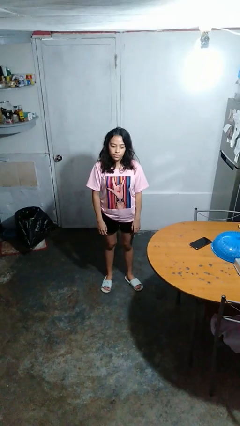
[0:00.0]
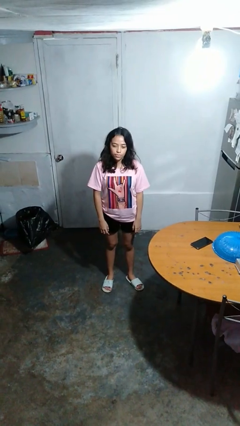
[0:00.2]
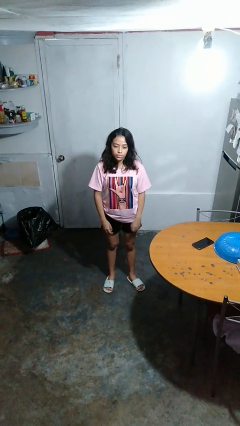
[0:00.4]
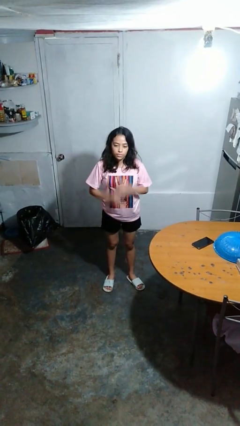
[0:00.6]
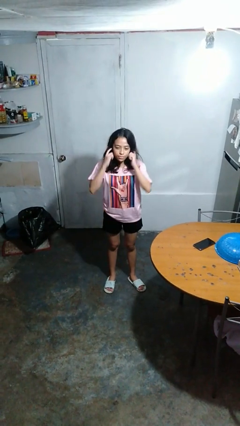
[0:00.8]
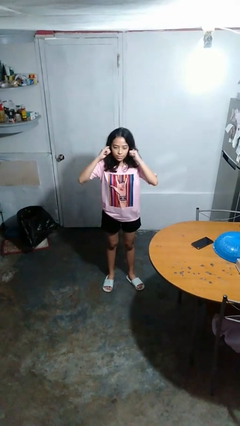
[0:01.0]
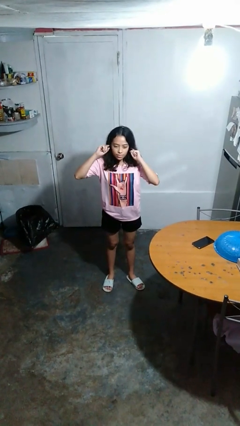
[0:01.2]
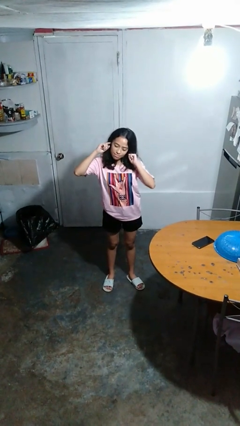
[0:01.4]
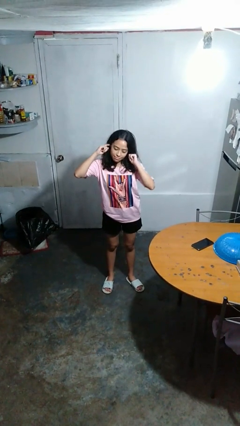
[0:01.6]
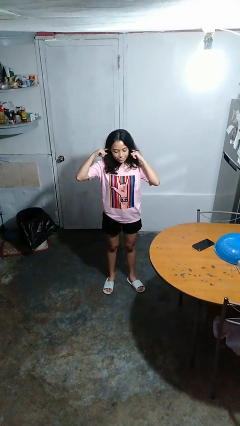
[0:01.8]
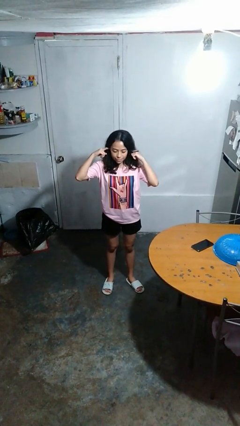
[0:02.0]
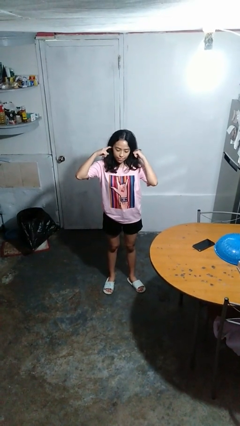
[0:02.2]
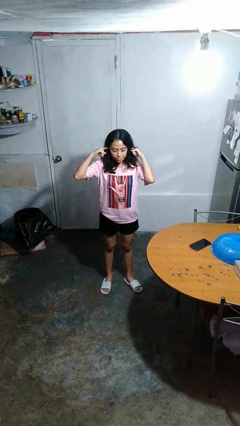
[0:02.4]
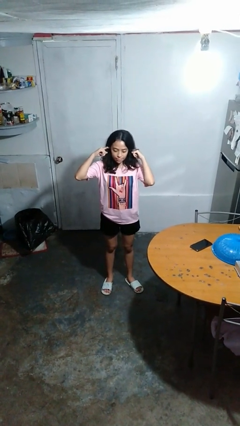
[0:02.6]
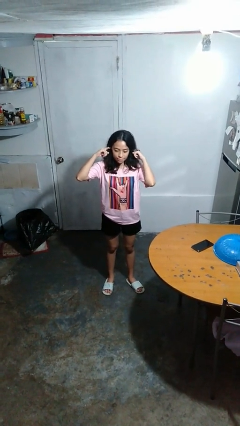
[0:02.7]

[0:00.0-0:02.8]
person puts fingers in ear

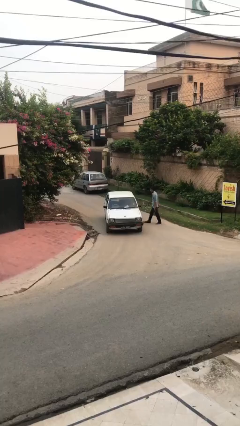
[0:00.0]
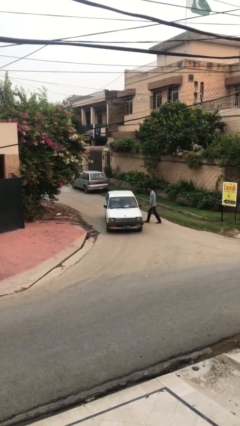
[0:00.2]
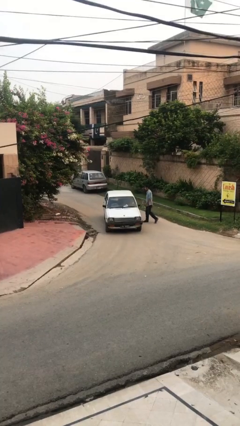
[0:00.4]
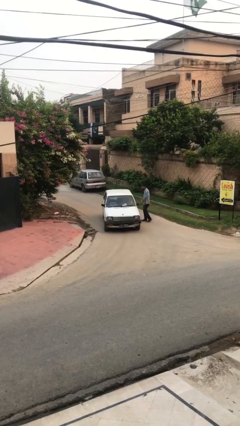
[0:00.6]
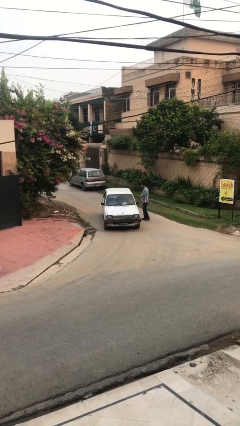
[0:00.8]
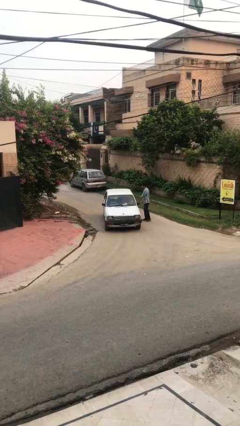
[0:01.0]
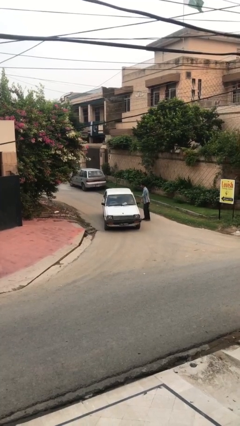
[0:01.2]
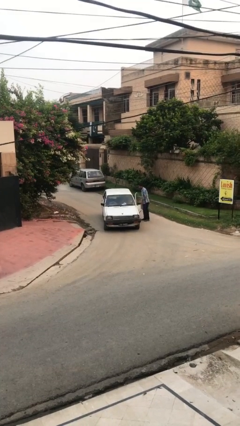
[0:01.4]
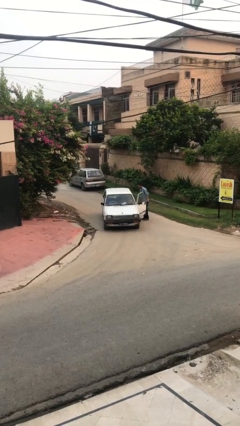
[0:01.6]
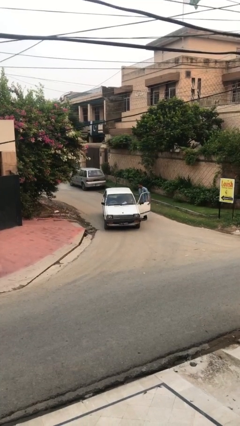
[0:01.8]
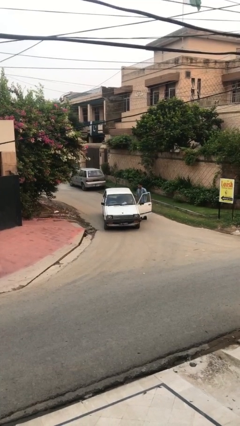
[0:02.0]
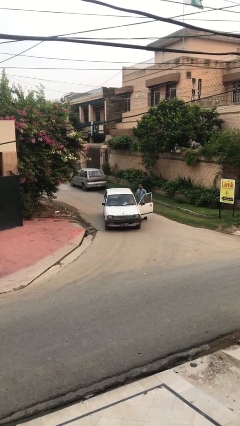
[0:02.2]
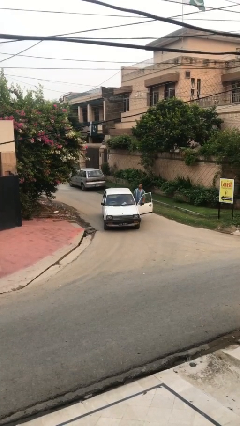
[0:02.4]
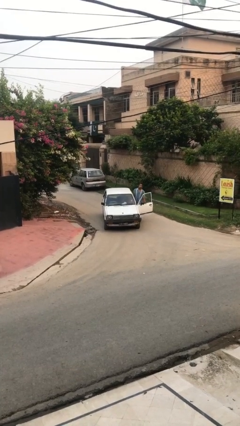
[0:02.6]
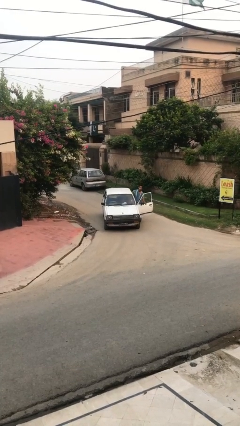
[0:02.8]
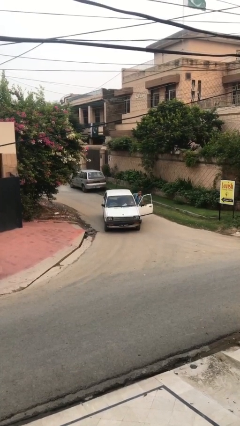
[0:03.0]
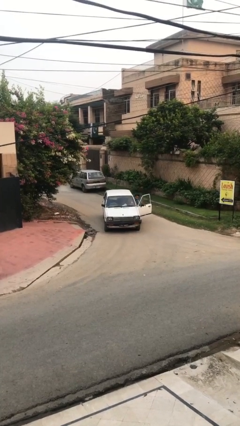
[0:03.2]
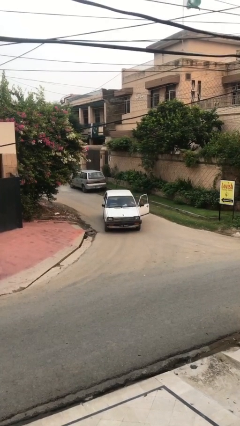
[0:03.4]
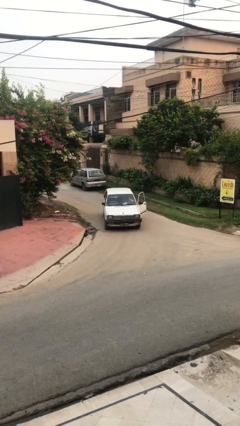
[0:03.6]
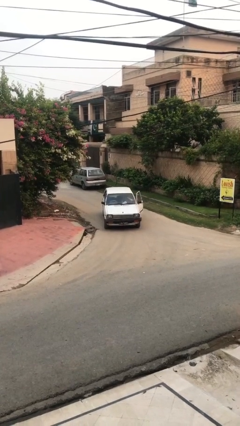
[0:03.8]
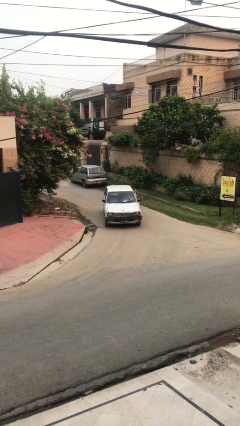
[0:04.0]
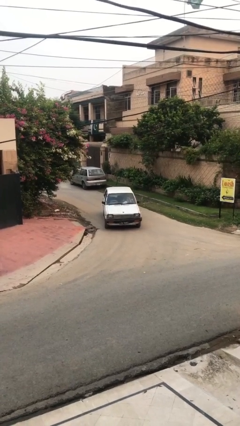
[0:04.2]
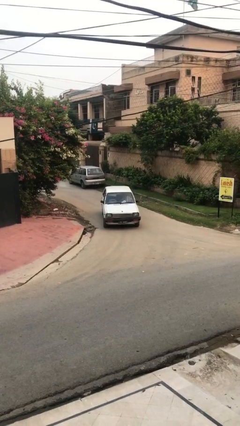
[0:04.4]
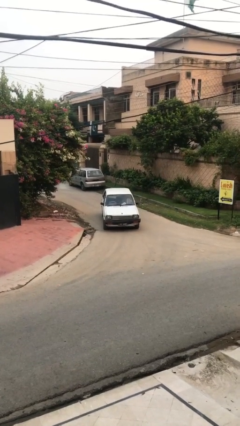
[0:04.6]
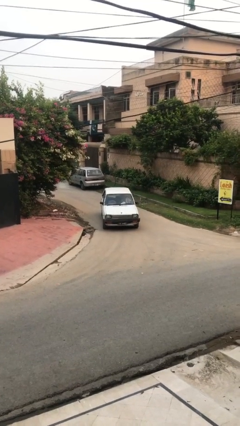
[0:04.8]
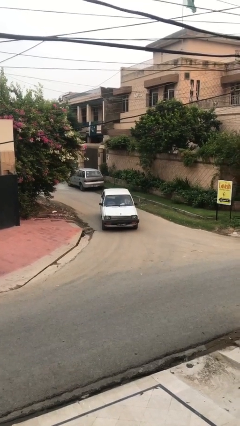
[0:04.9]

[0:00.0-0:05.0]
car picks up person

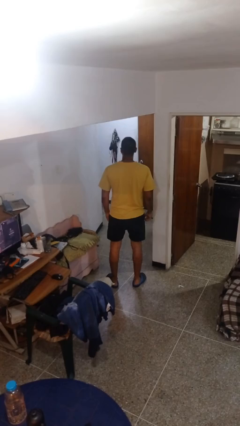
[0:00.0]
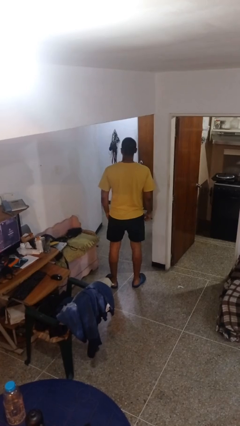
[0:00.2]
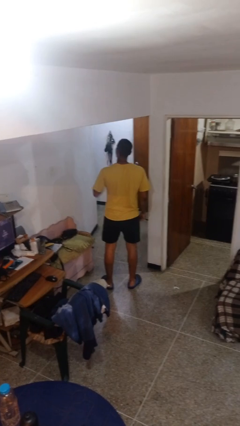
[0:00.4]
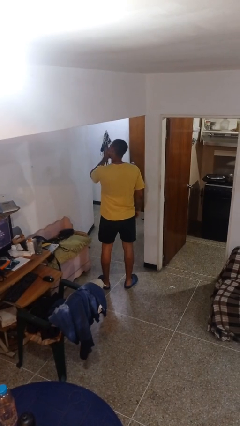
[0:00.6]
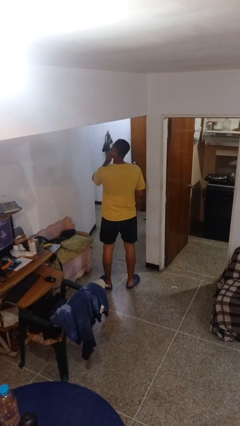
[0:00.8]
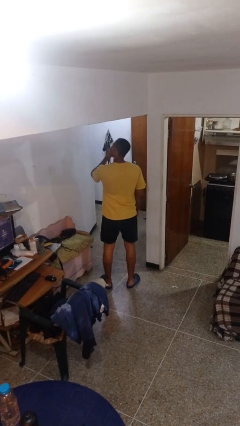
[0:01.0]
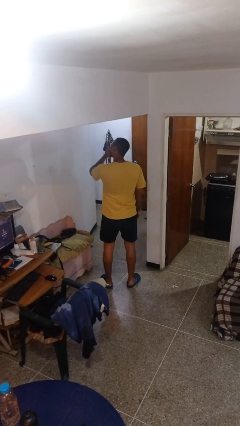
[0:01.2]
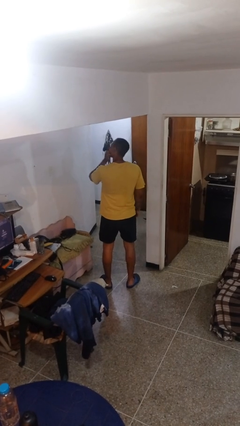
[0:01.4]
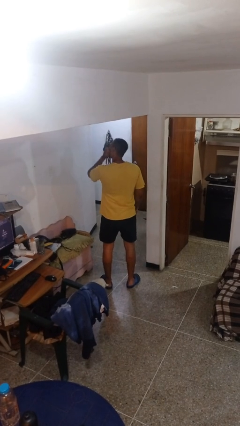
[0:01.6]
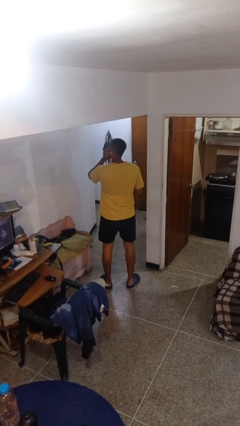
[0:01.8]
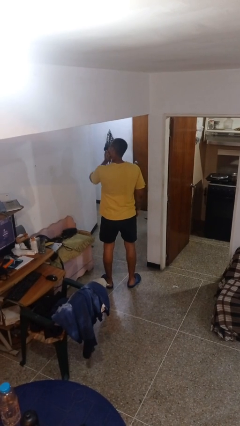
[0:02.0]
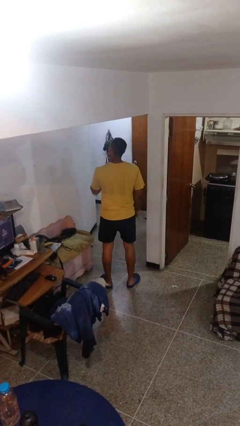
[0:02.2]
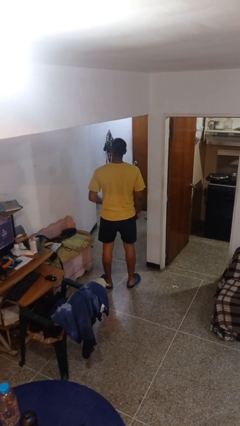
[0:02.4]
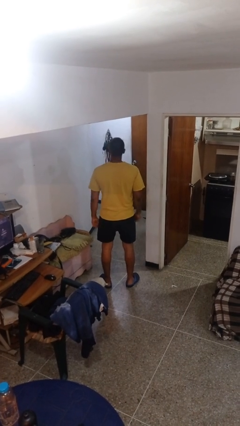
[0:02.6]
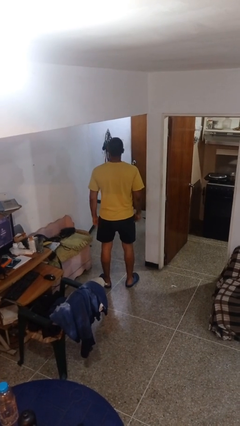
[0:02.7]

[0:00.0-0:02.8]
person scratches face

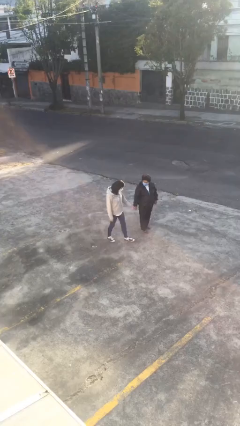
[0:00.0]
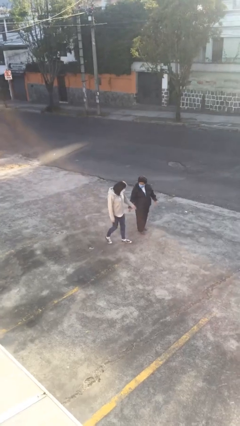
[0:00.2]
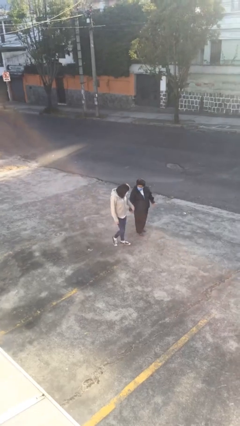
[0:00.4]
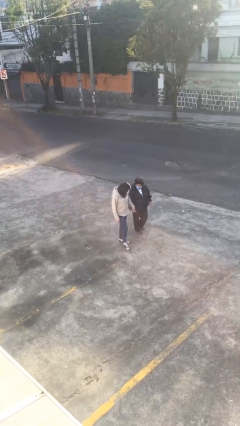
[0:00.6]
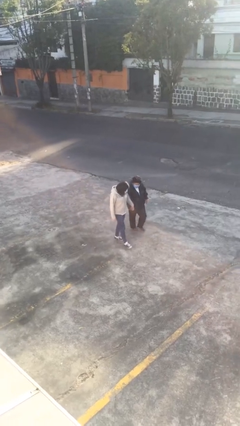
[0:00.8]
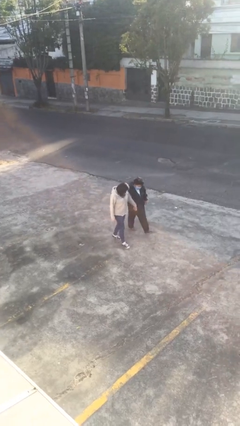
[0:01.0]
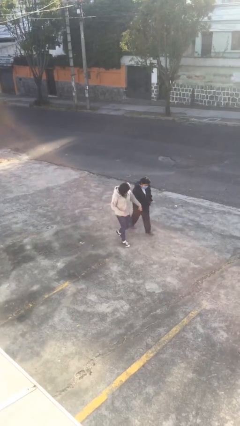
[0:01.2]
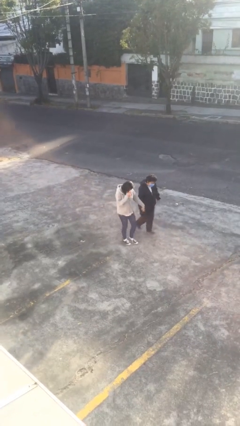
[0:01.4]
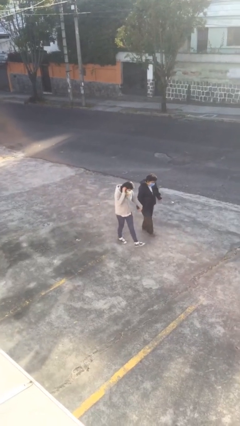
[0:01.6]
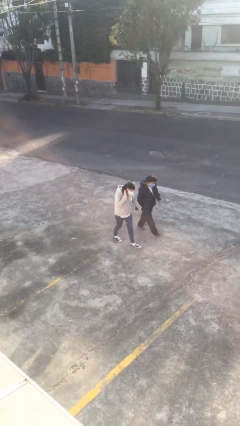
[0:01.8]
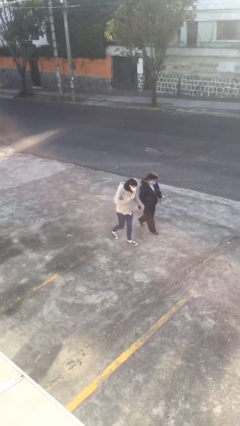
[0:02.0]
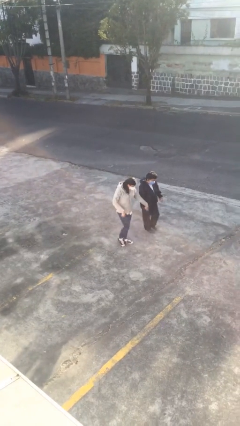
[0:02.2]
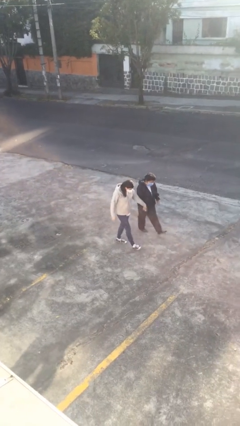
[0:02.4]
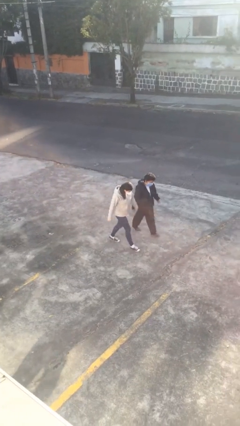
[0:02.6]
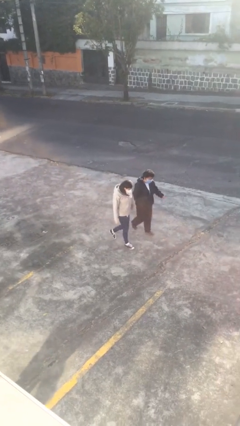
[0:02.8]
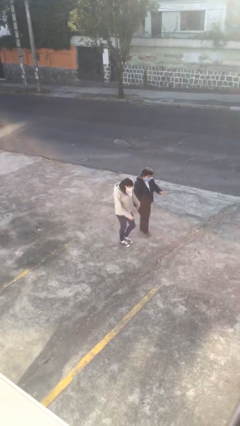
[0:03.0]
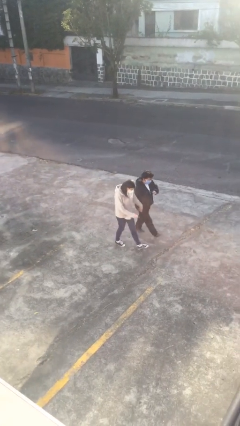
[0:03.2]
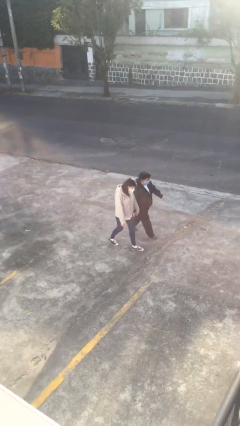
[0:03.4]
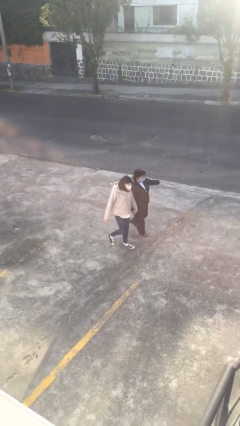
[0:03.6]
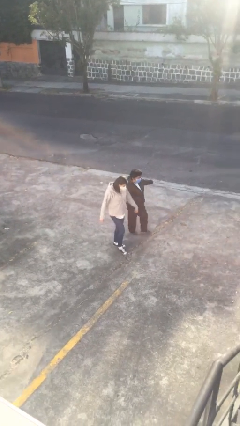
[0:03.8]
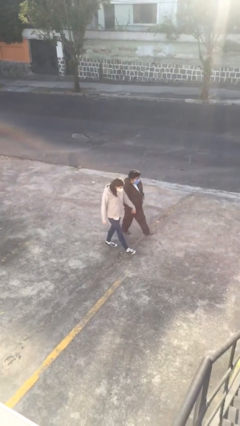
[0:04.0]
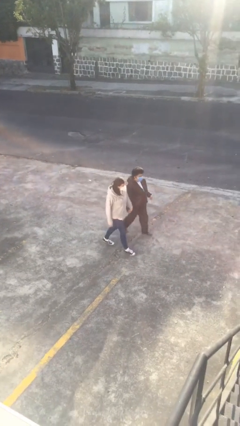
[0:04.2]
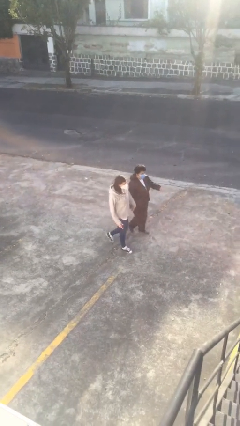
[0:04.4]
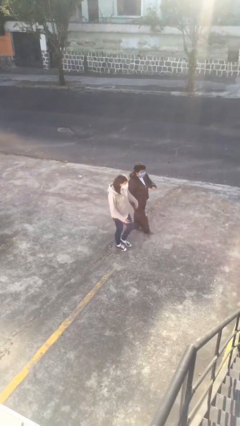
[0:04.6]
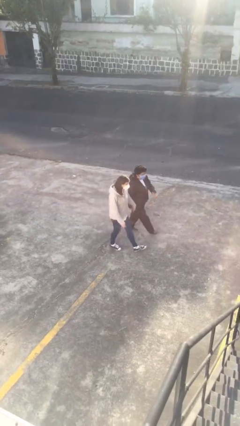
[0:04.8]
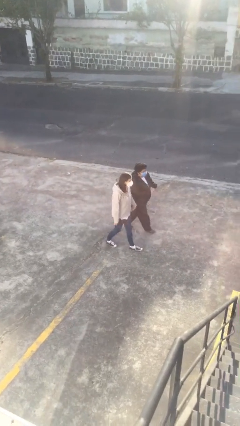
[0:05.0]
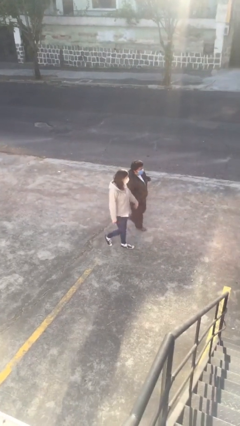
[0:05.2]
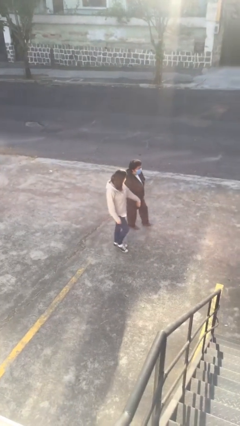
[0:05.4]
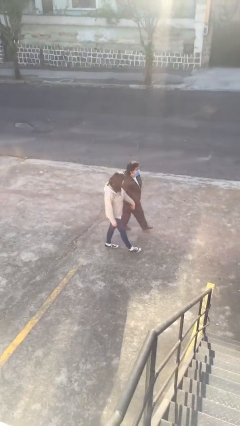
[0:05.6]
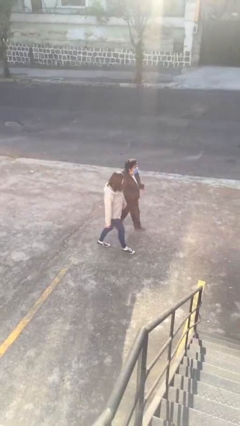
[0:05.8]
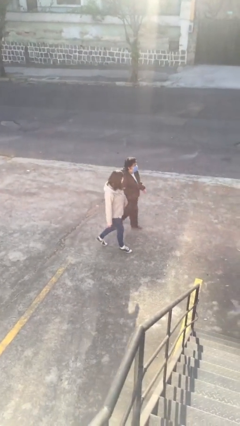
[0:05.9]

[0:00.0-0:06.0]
person holds hand

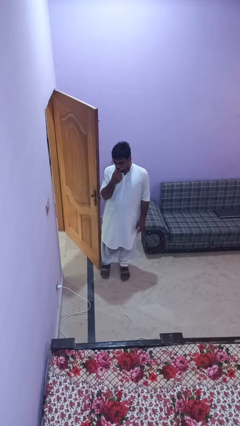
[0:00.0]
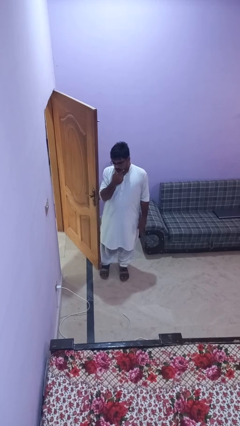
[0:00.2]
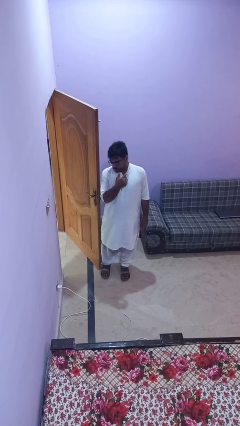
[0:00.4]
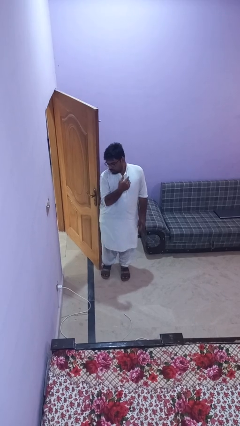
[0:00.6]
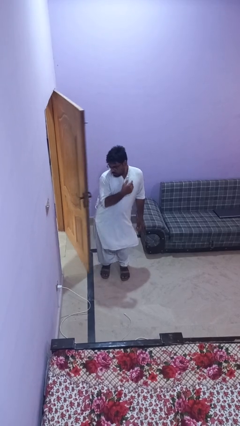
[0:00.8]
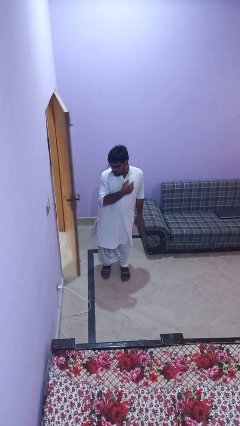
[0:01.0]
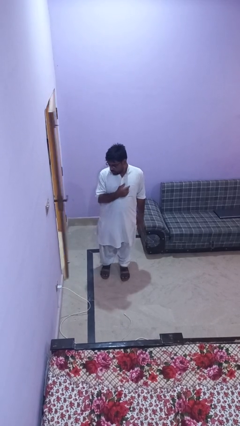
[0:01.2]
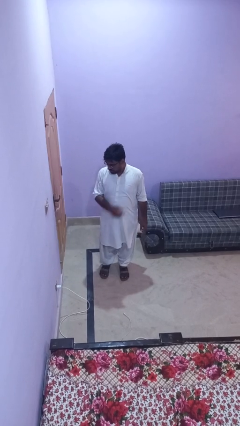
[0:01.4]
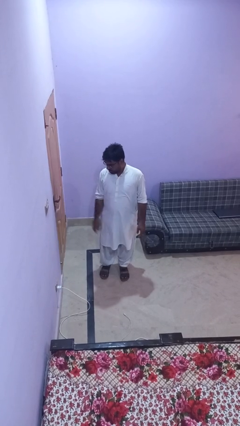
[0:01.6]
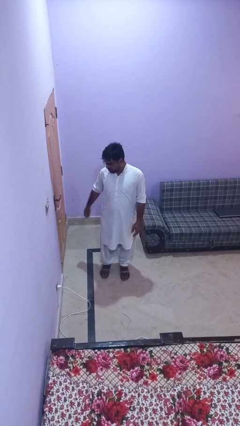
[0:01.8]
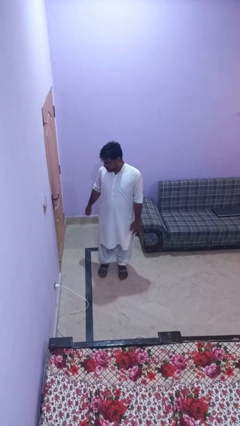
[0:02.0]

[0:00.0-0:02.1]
person closes door with hip
